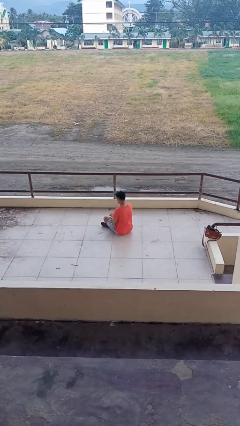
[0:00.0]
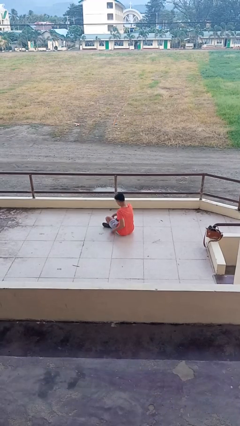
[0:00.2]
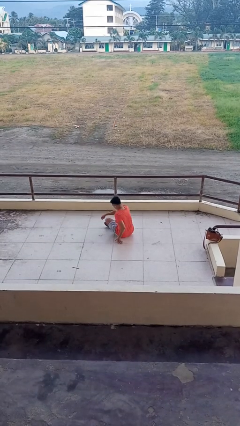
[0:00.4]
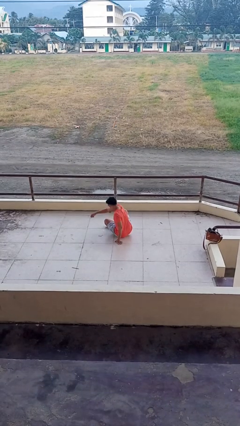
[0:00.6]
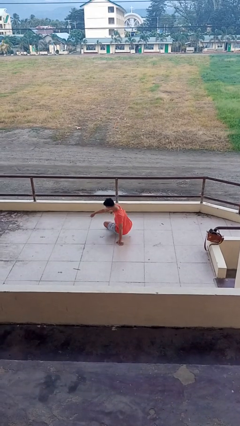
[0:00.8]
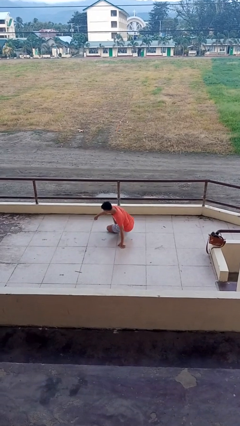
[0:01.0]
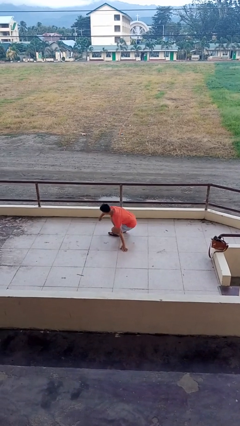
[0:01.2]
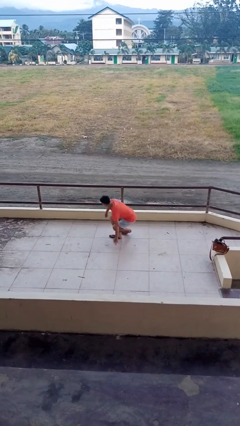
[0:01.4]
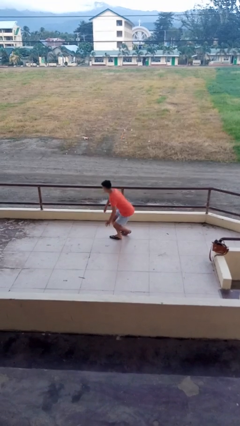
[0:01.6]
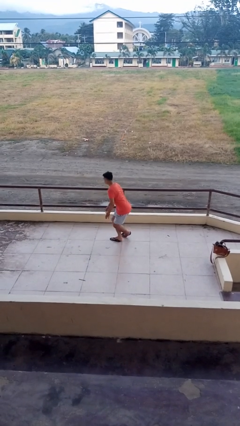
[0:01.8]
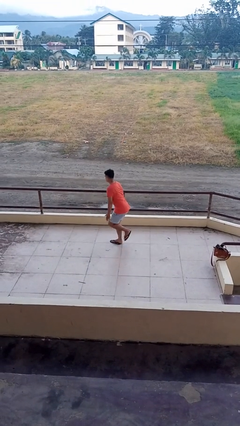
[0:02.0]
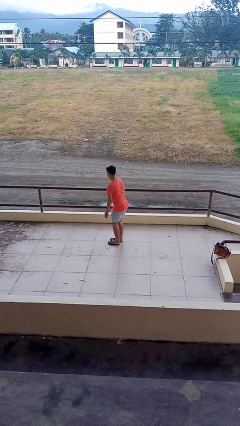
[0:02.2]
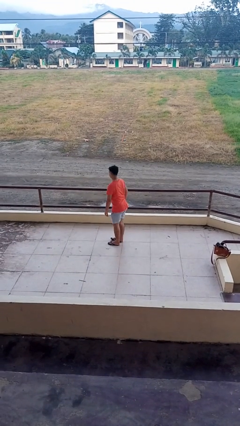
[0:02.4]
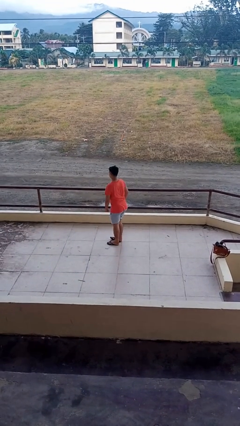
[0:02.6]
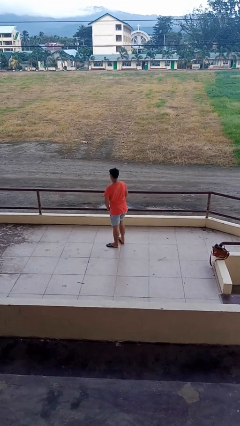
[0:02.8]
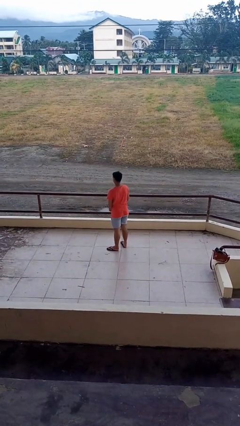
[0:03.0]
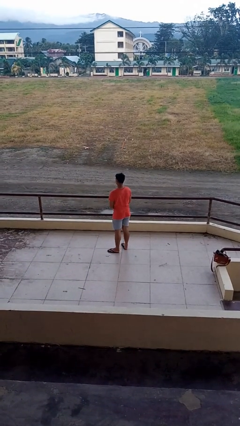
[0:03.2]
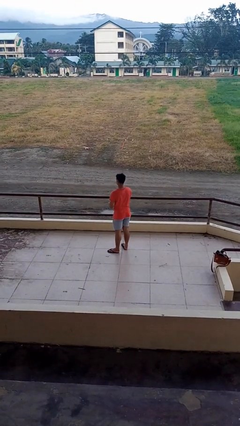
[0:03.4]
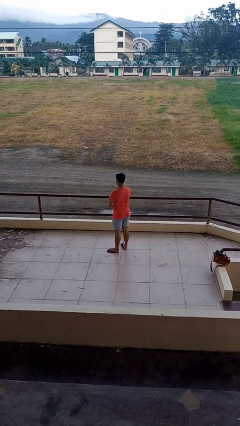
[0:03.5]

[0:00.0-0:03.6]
person stands up from floor

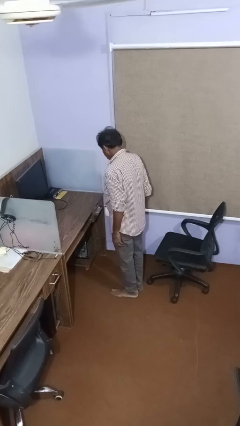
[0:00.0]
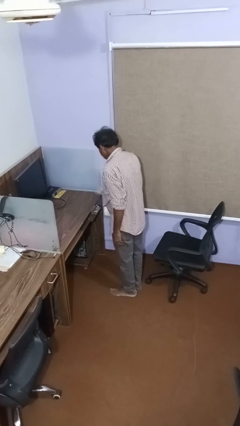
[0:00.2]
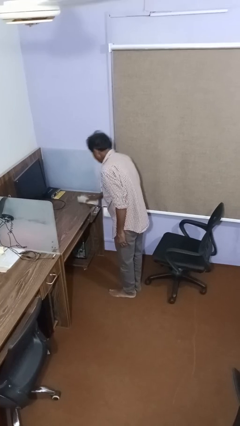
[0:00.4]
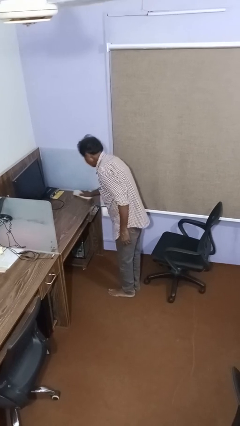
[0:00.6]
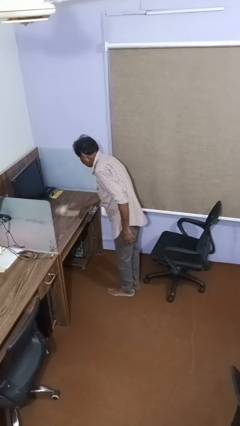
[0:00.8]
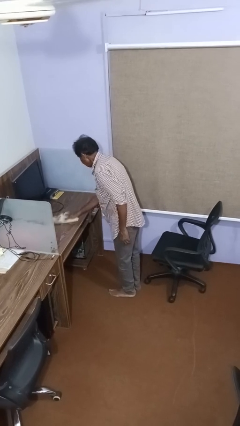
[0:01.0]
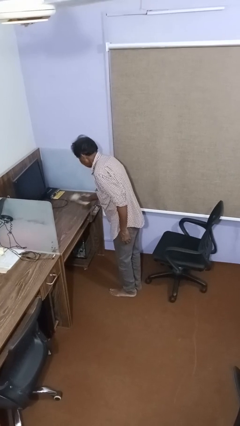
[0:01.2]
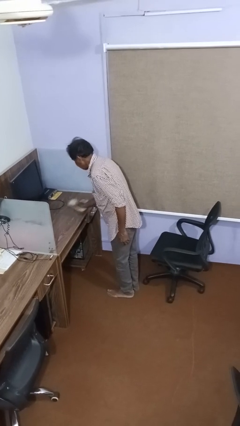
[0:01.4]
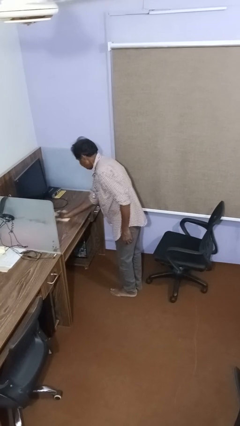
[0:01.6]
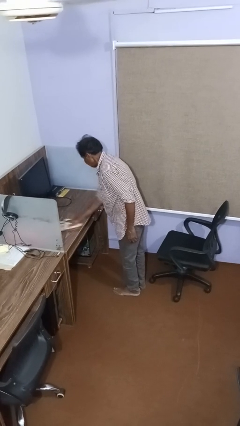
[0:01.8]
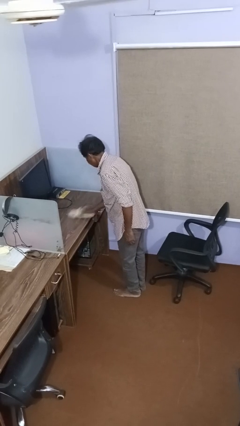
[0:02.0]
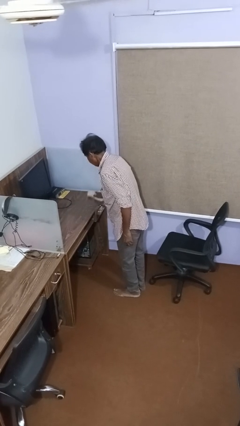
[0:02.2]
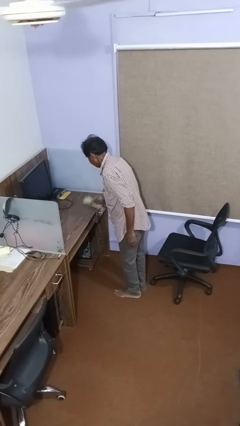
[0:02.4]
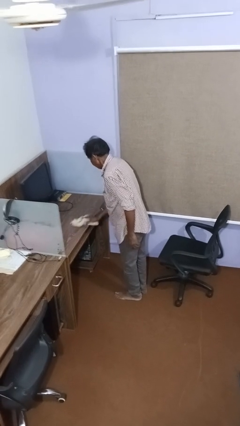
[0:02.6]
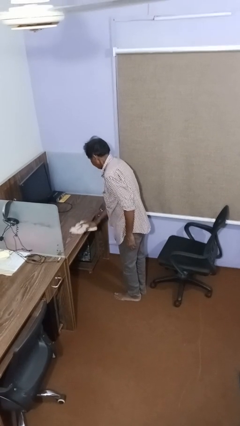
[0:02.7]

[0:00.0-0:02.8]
person dusts furniture

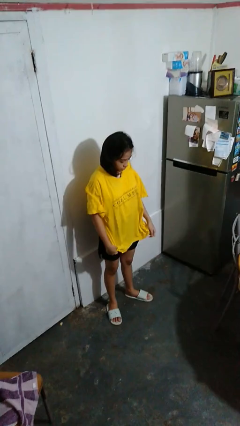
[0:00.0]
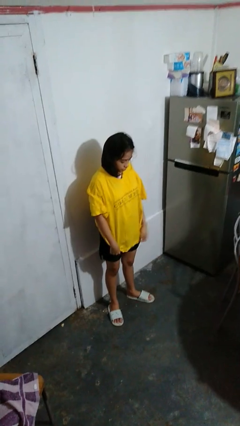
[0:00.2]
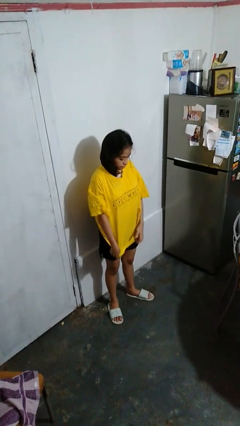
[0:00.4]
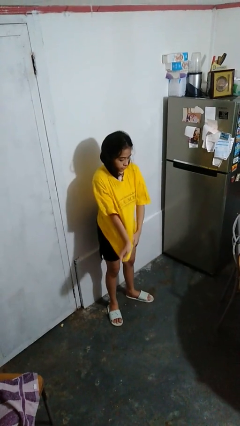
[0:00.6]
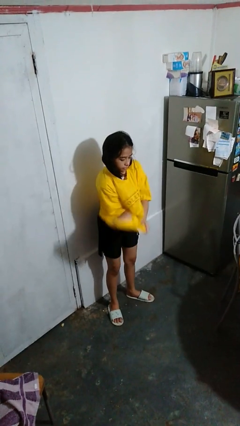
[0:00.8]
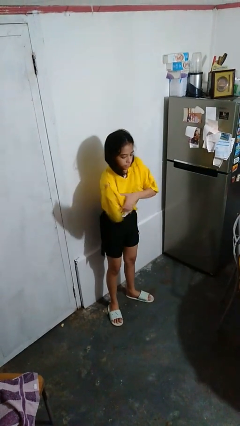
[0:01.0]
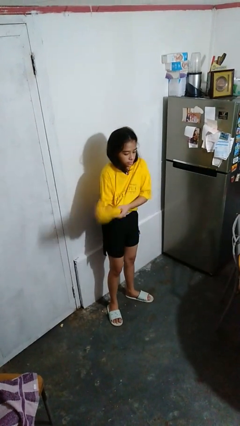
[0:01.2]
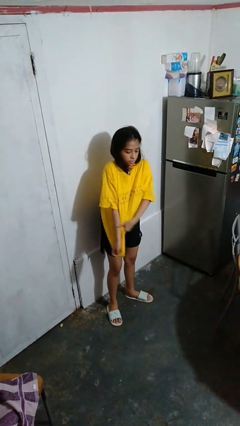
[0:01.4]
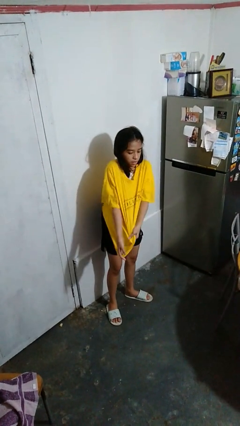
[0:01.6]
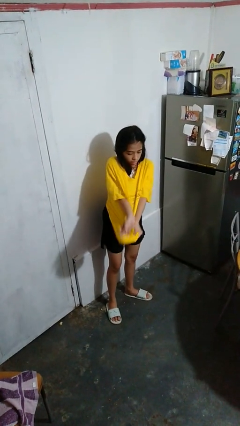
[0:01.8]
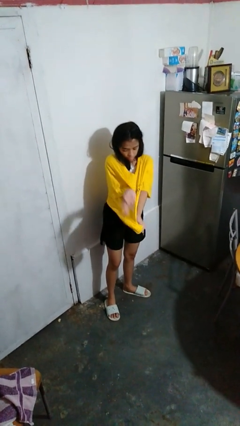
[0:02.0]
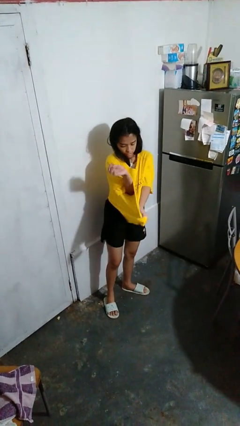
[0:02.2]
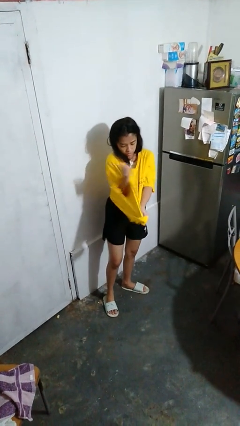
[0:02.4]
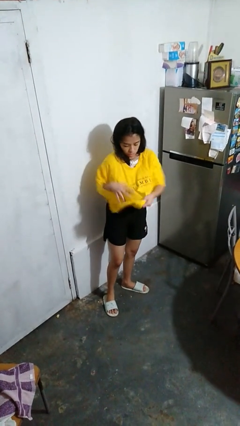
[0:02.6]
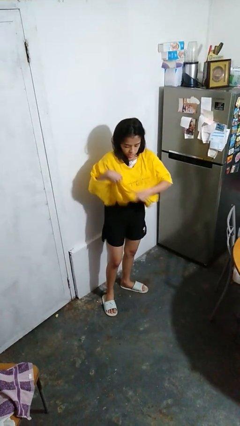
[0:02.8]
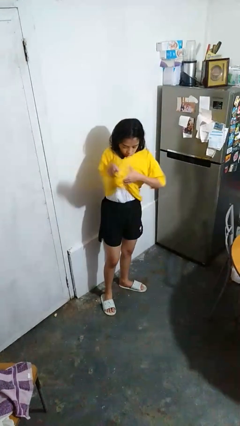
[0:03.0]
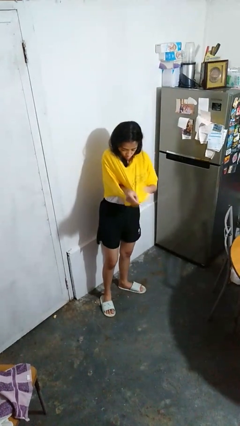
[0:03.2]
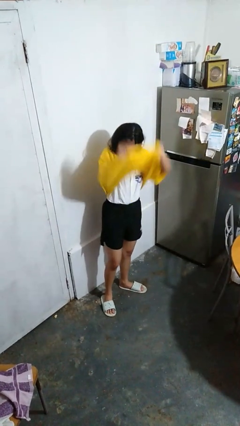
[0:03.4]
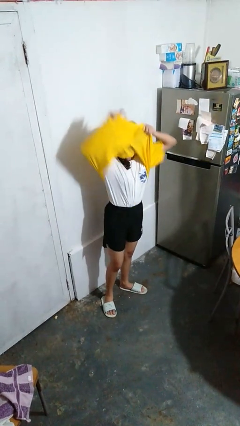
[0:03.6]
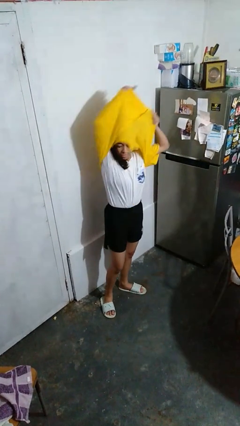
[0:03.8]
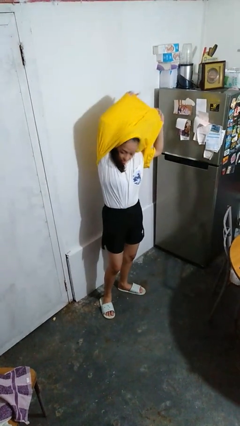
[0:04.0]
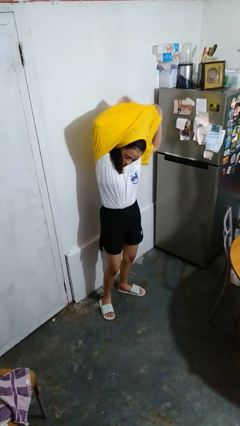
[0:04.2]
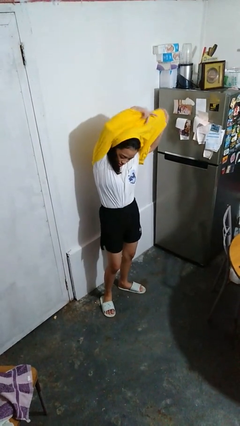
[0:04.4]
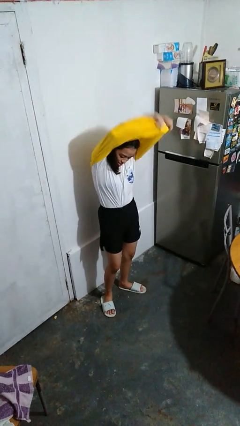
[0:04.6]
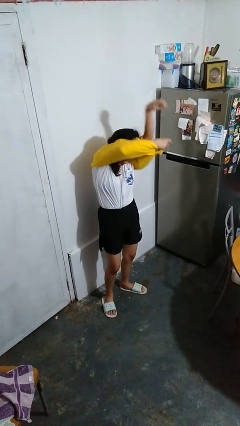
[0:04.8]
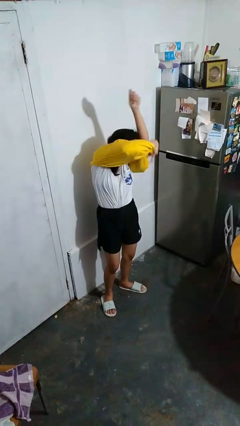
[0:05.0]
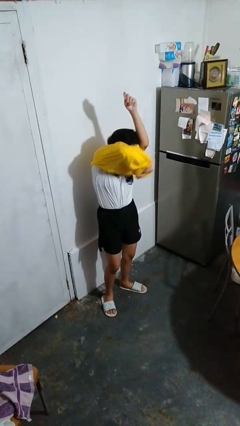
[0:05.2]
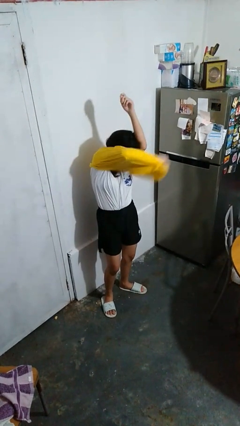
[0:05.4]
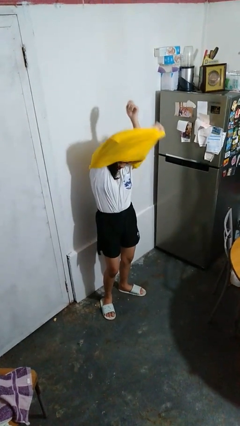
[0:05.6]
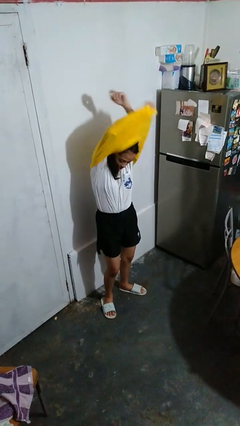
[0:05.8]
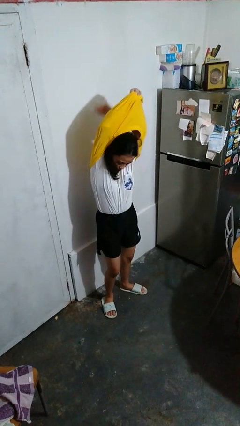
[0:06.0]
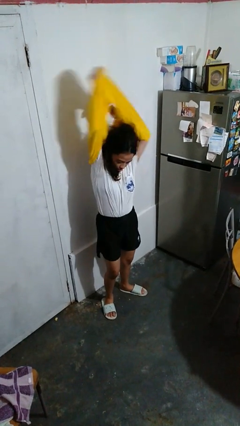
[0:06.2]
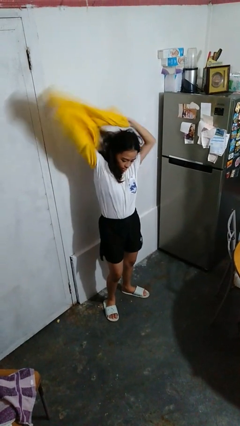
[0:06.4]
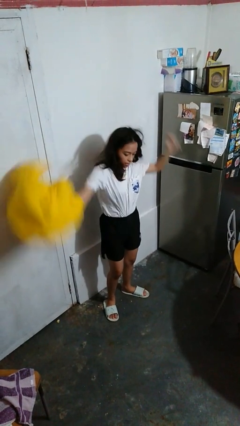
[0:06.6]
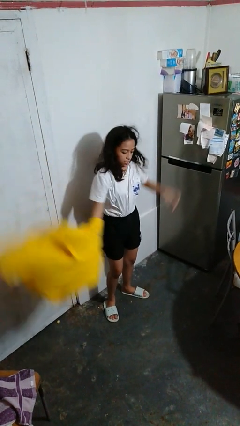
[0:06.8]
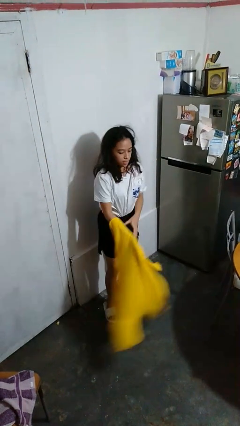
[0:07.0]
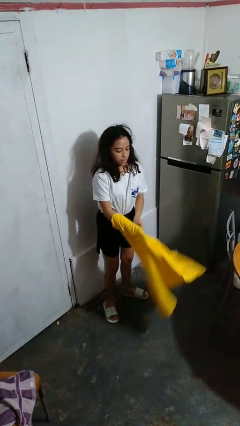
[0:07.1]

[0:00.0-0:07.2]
person takes off shirt

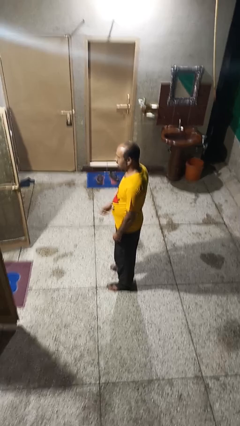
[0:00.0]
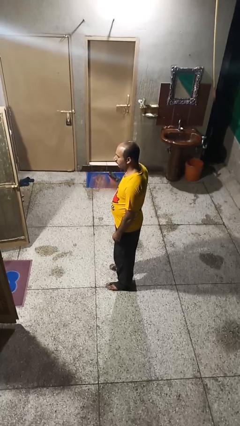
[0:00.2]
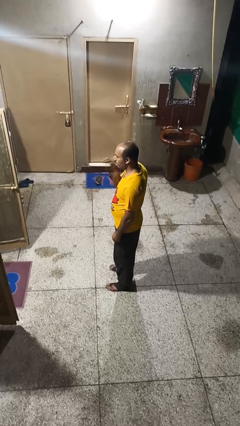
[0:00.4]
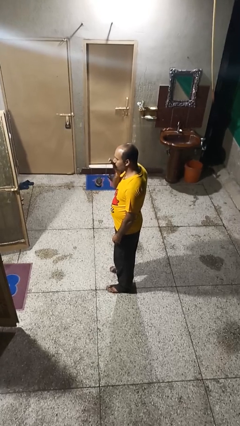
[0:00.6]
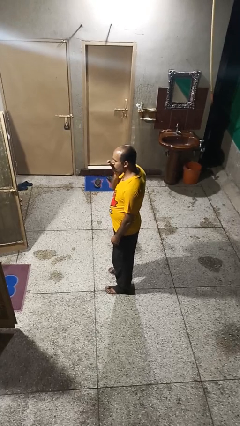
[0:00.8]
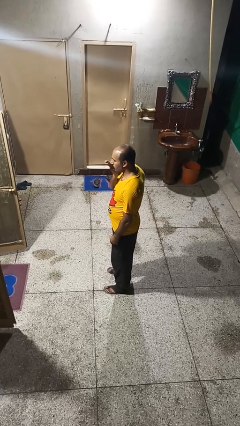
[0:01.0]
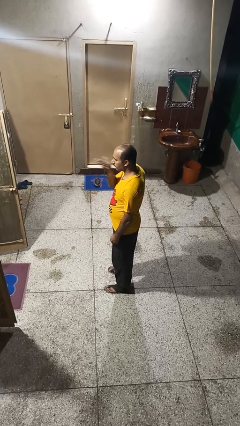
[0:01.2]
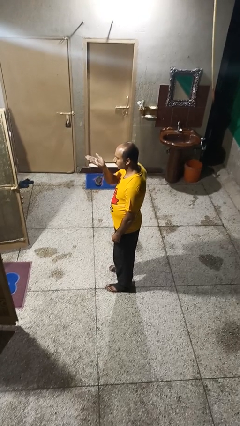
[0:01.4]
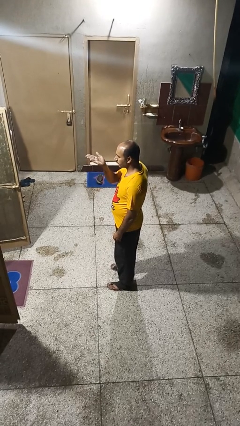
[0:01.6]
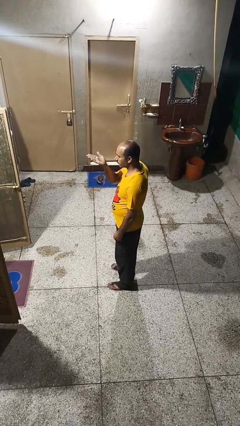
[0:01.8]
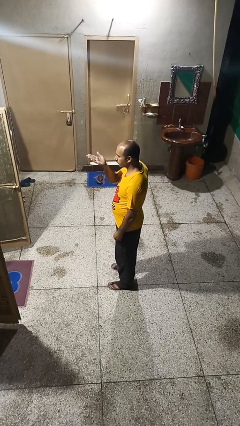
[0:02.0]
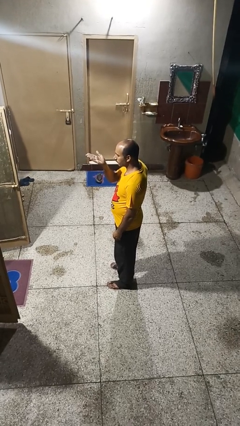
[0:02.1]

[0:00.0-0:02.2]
person gestures blow kiss

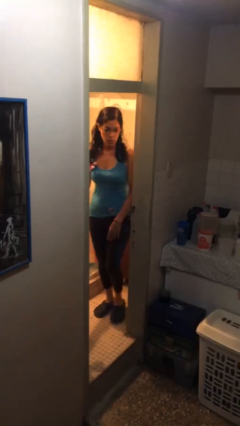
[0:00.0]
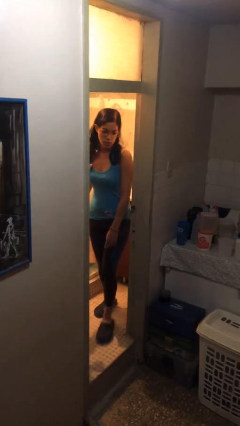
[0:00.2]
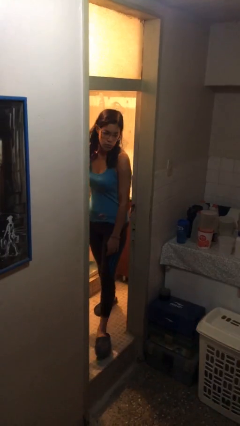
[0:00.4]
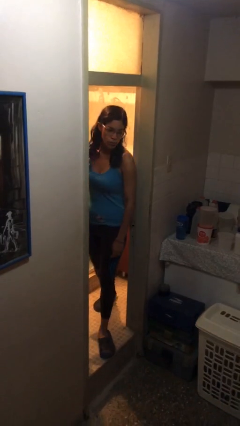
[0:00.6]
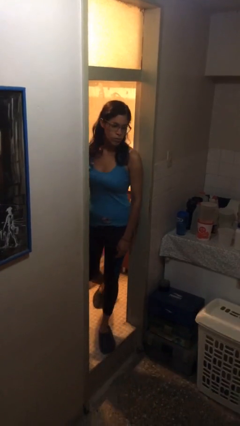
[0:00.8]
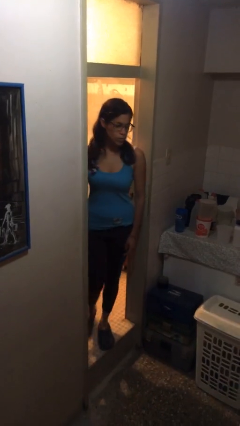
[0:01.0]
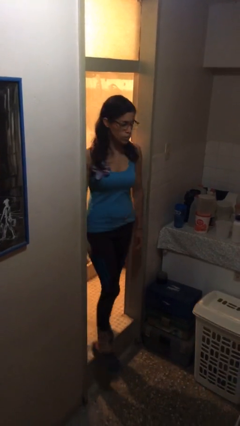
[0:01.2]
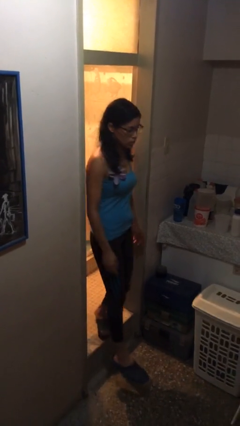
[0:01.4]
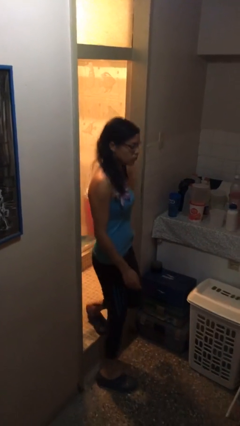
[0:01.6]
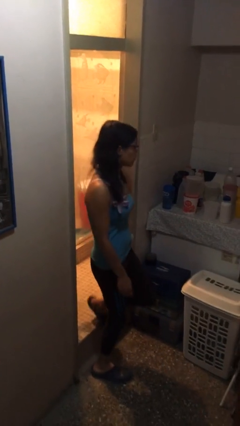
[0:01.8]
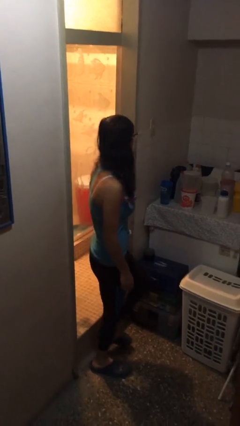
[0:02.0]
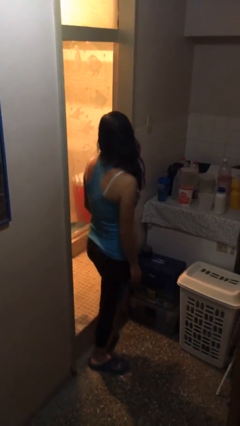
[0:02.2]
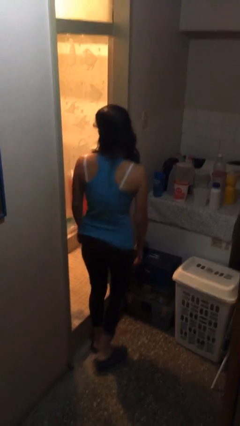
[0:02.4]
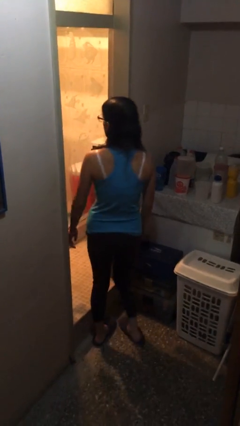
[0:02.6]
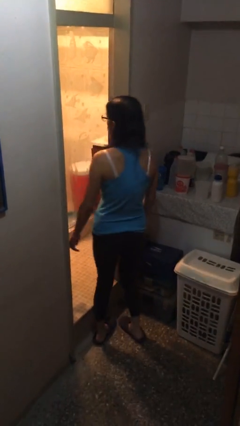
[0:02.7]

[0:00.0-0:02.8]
person enters scene through structure
